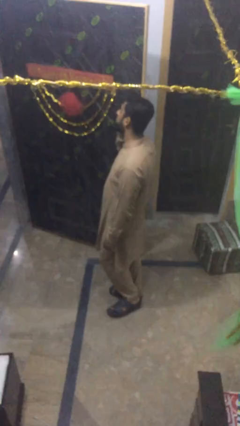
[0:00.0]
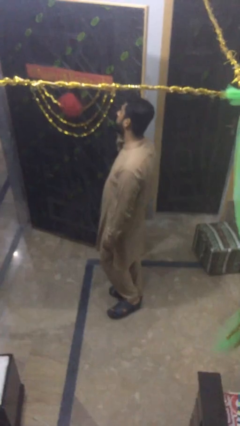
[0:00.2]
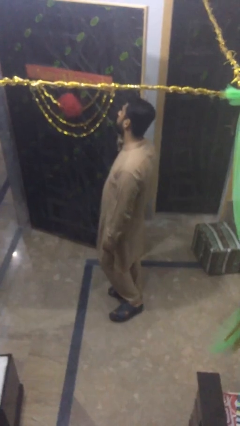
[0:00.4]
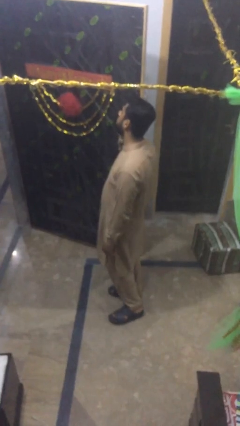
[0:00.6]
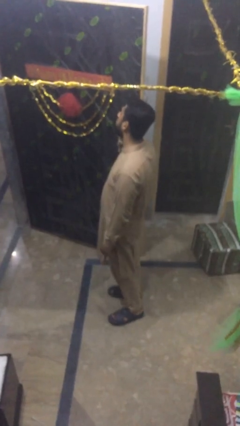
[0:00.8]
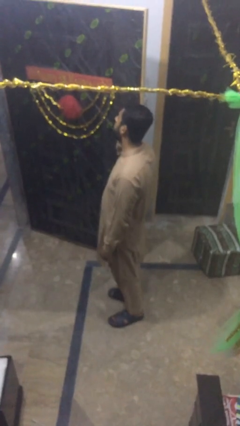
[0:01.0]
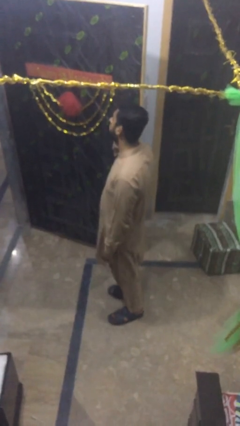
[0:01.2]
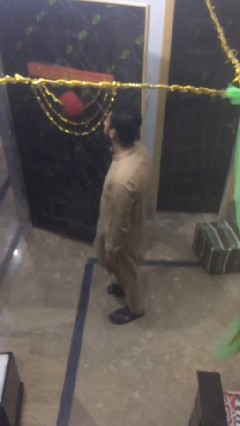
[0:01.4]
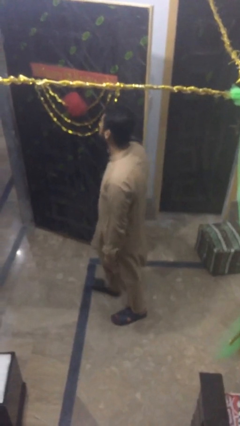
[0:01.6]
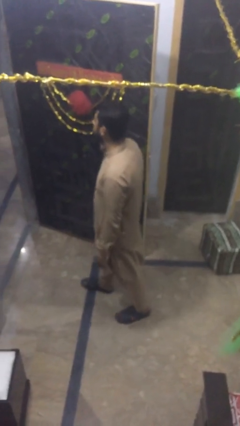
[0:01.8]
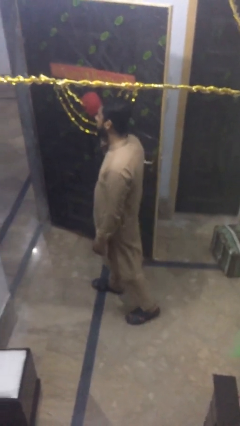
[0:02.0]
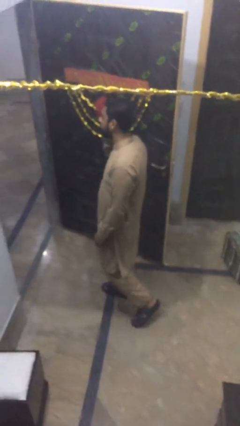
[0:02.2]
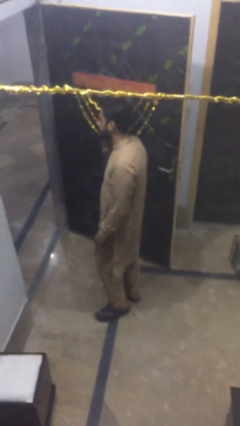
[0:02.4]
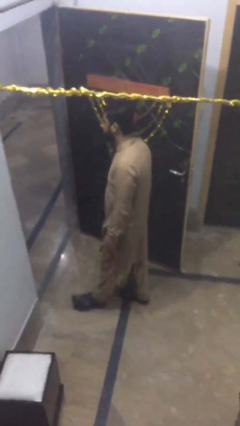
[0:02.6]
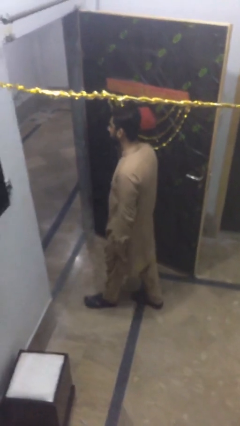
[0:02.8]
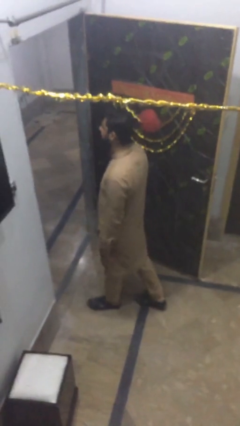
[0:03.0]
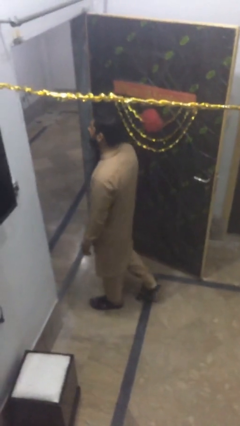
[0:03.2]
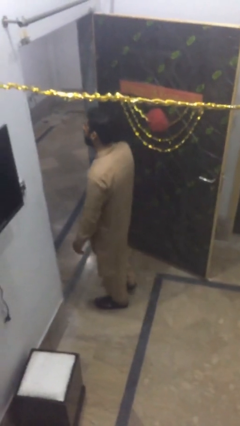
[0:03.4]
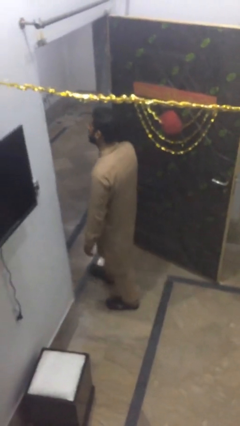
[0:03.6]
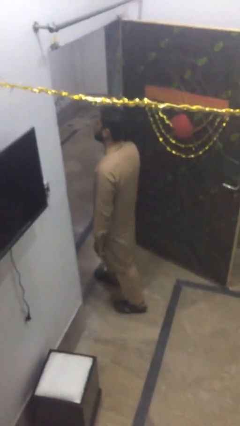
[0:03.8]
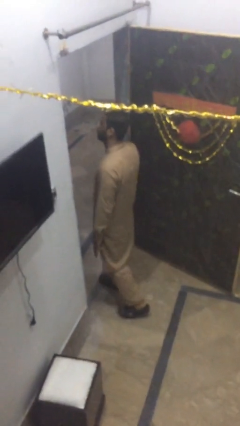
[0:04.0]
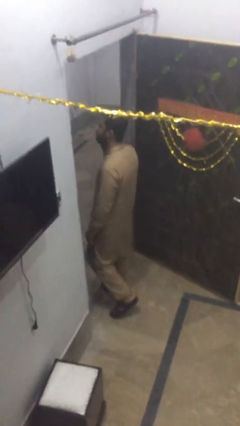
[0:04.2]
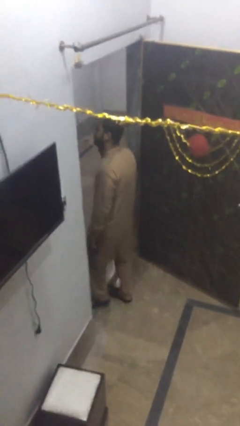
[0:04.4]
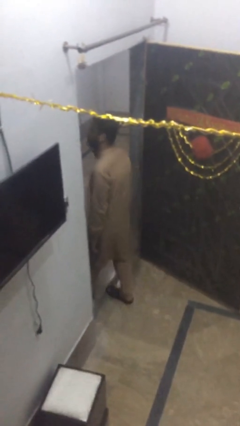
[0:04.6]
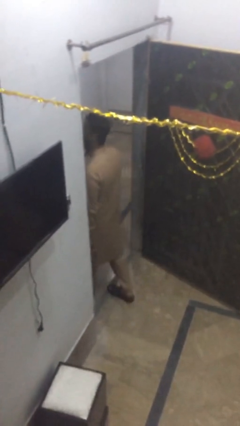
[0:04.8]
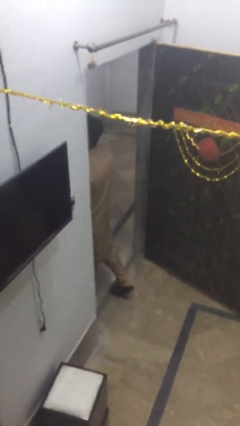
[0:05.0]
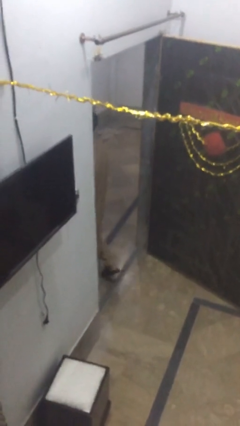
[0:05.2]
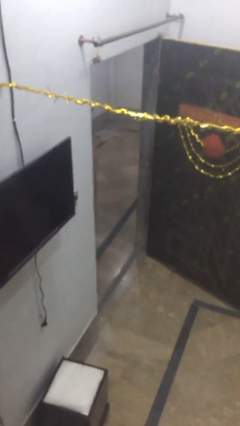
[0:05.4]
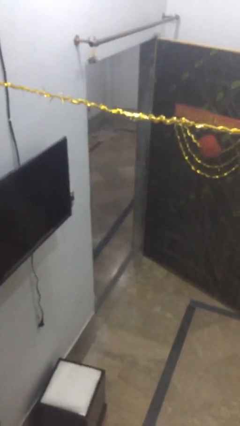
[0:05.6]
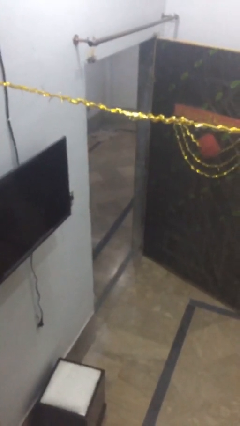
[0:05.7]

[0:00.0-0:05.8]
person exits scene through structure

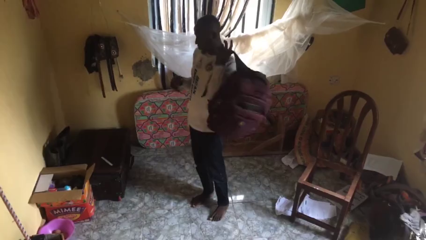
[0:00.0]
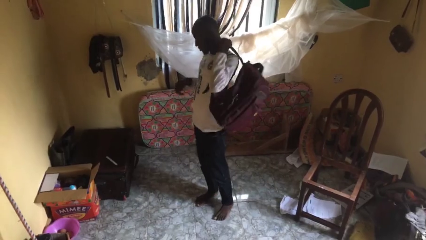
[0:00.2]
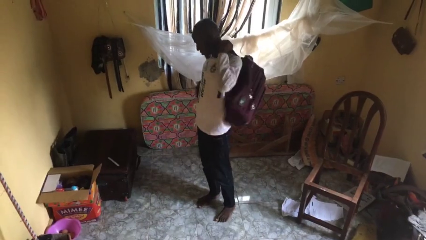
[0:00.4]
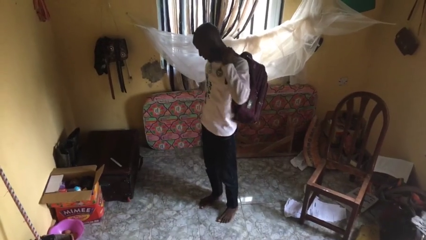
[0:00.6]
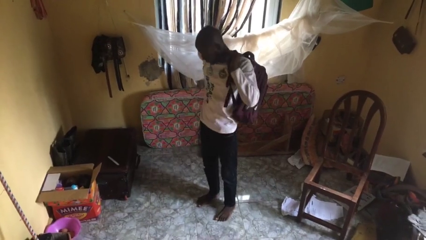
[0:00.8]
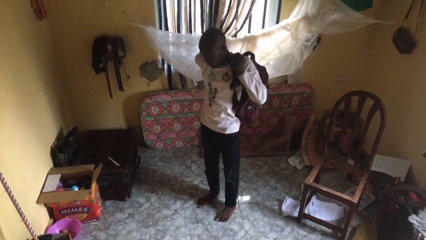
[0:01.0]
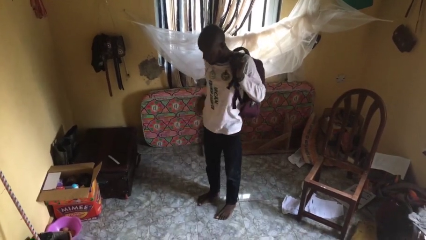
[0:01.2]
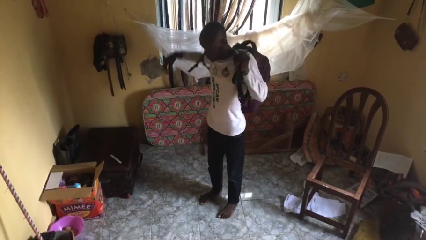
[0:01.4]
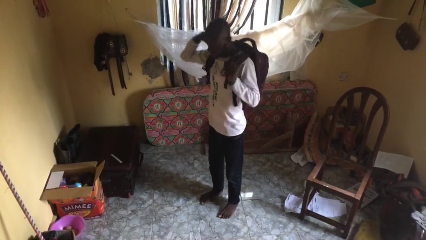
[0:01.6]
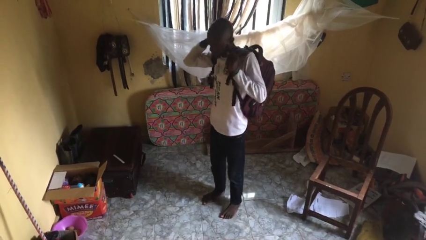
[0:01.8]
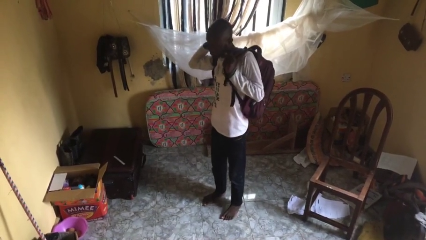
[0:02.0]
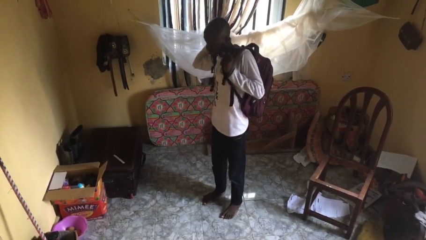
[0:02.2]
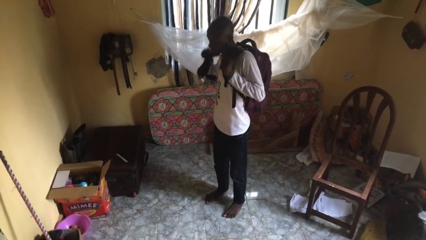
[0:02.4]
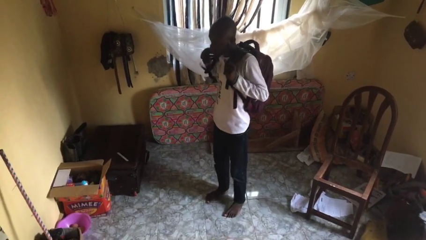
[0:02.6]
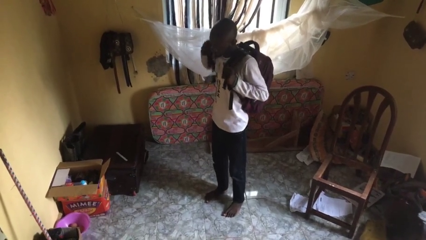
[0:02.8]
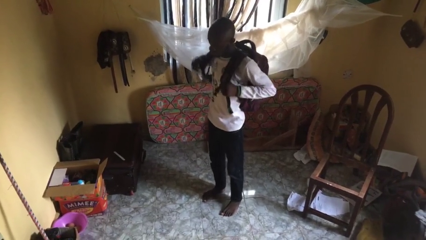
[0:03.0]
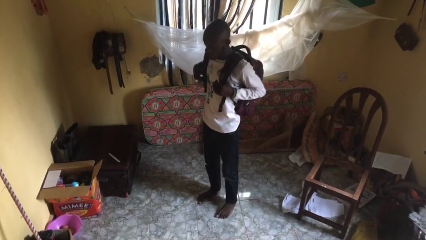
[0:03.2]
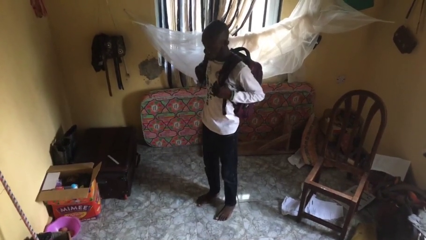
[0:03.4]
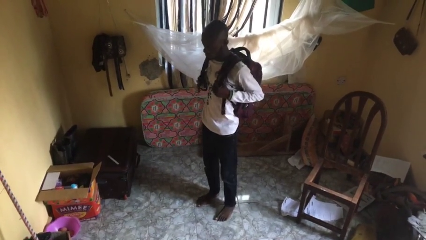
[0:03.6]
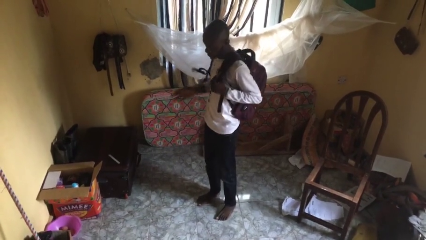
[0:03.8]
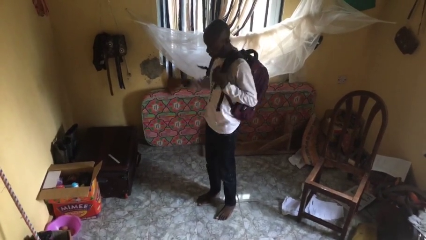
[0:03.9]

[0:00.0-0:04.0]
person puts on backpack

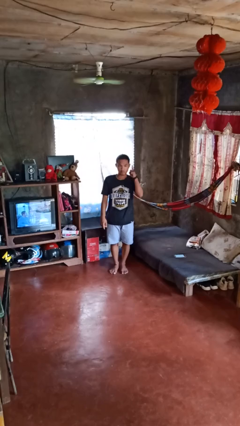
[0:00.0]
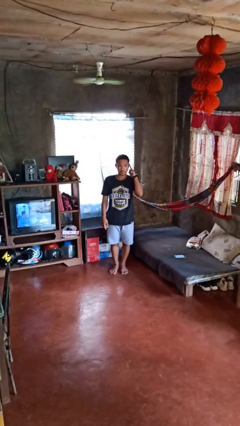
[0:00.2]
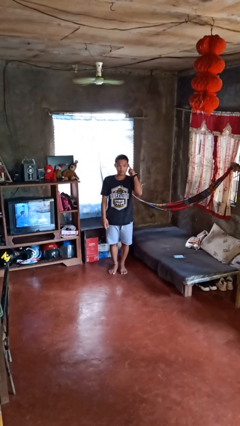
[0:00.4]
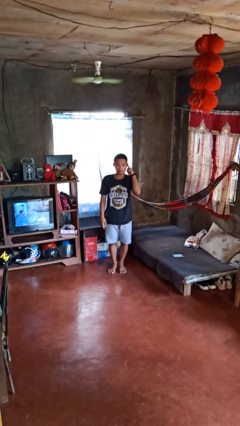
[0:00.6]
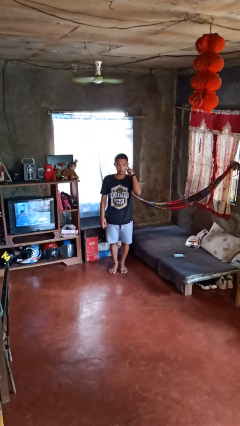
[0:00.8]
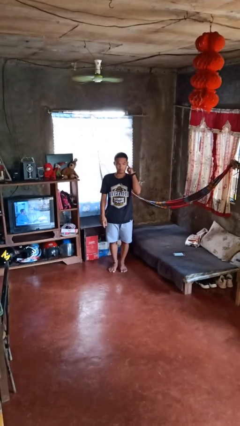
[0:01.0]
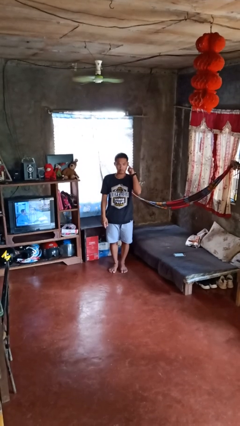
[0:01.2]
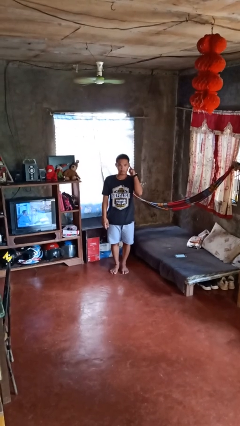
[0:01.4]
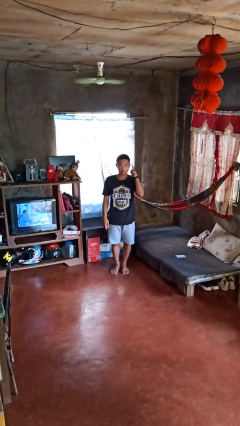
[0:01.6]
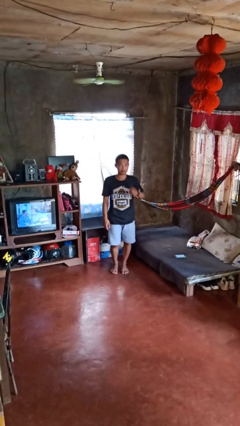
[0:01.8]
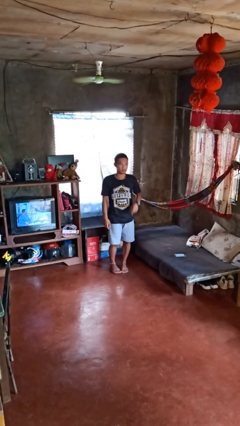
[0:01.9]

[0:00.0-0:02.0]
person gestures listen closely

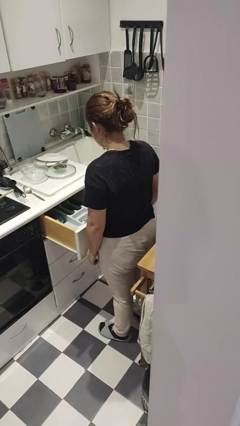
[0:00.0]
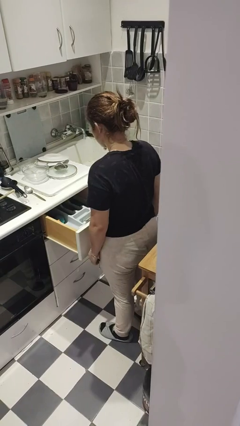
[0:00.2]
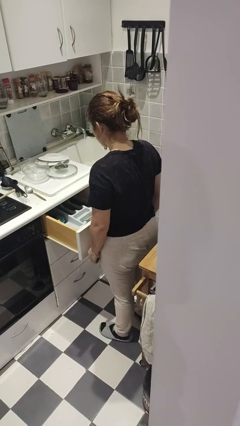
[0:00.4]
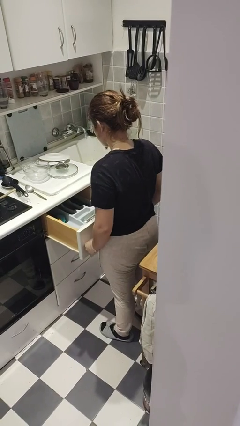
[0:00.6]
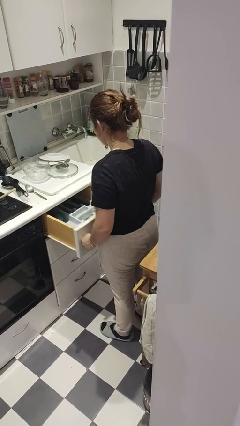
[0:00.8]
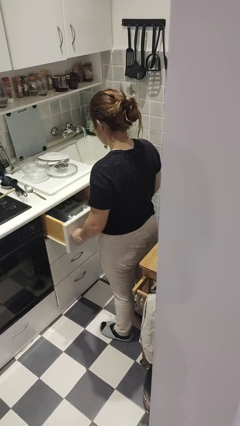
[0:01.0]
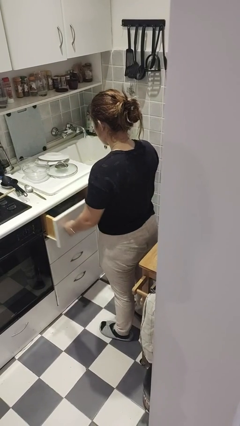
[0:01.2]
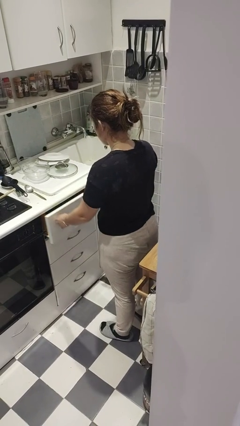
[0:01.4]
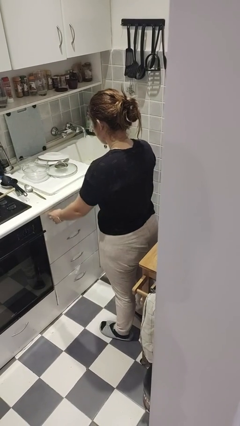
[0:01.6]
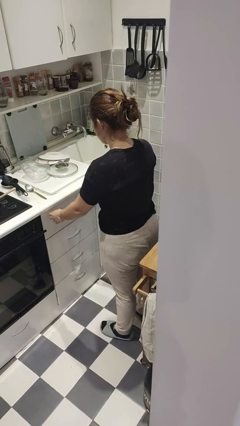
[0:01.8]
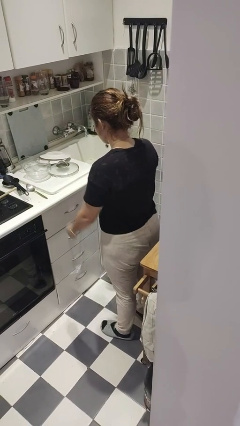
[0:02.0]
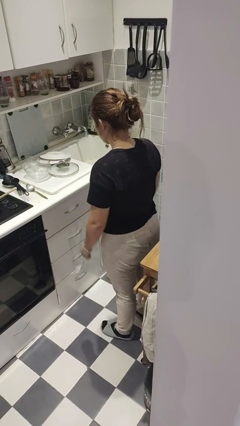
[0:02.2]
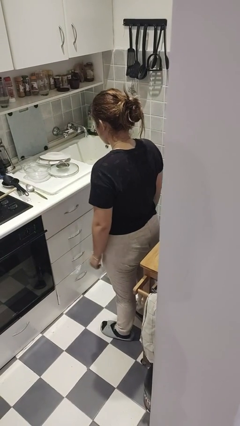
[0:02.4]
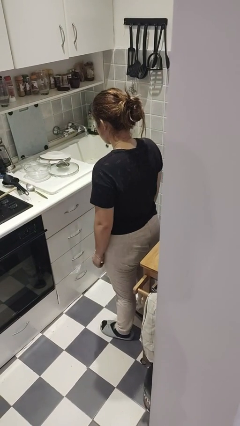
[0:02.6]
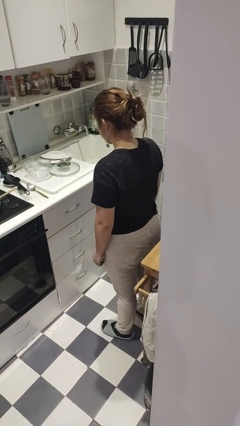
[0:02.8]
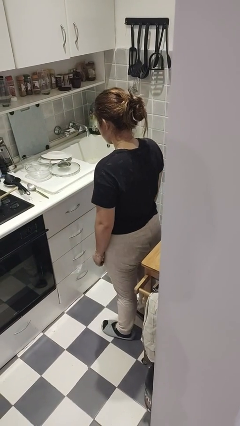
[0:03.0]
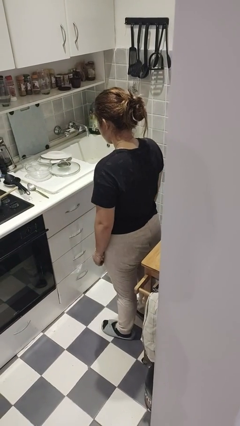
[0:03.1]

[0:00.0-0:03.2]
person closes kitchen drawer

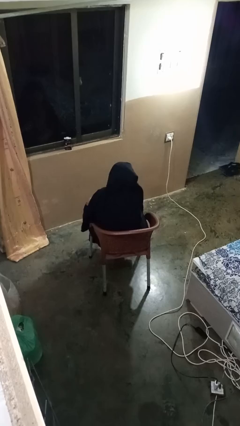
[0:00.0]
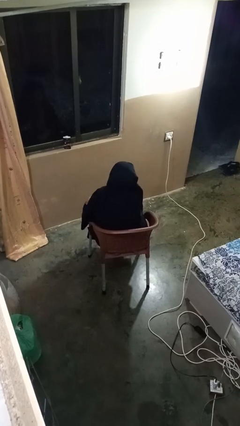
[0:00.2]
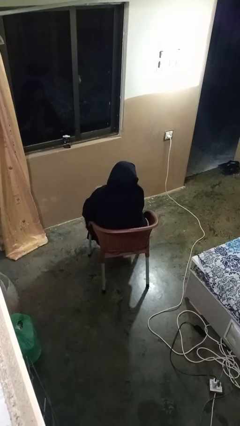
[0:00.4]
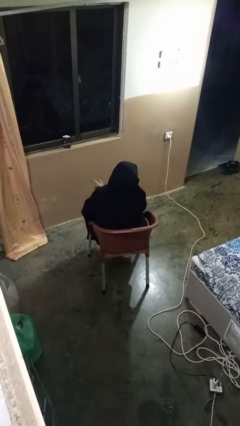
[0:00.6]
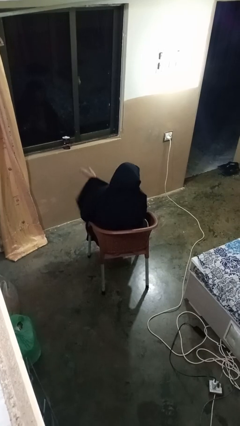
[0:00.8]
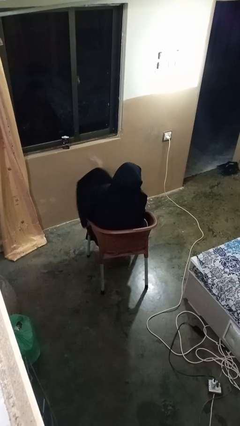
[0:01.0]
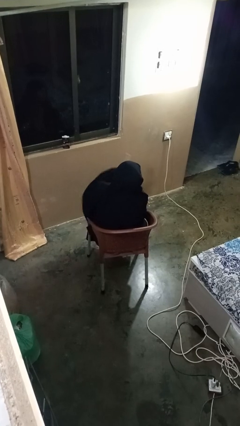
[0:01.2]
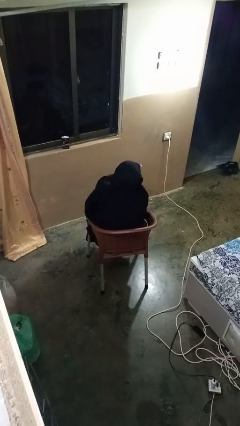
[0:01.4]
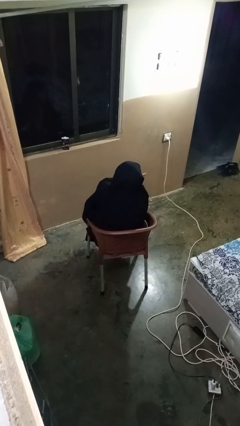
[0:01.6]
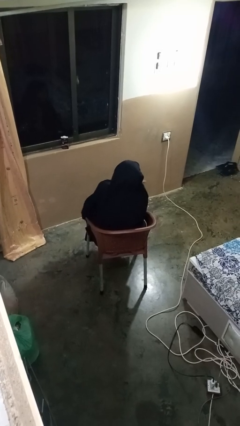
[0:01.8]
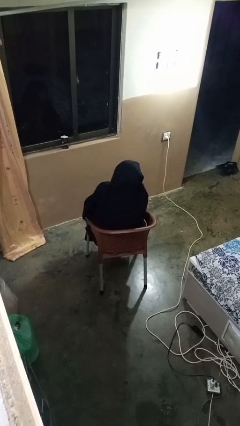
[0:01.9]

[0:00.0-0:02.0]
person gestures swipe right

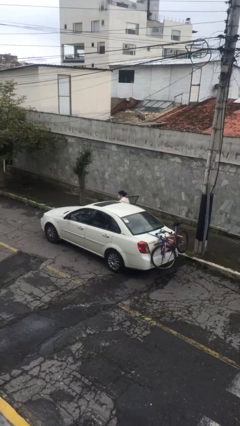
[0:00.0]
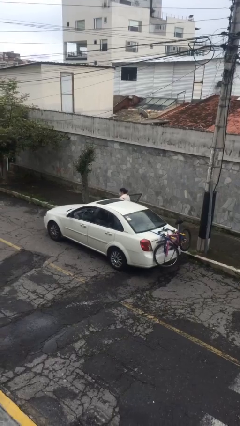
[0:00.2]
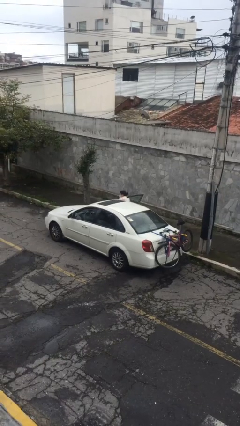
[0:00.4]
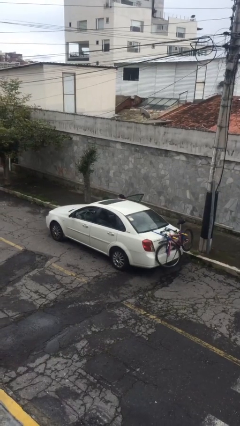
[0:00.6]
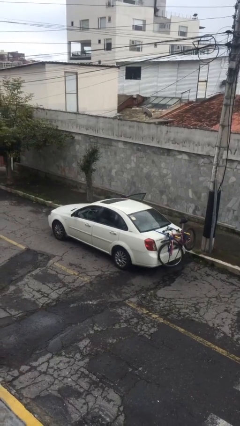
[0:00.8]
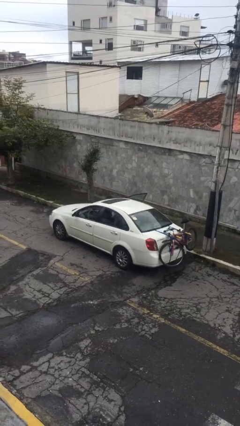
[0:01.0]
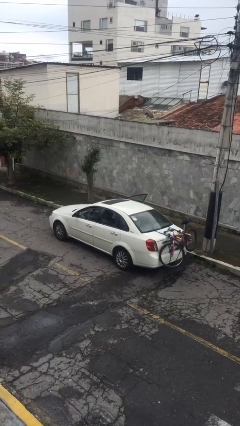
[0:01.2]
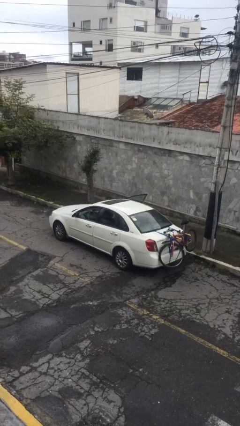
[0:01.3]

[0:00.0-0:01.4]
person enters car
